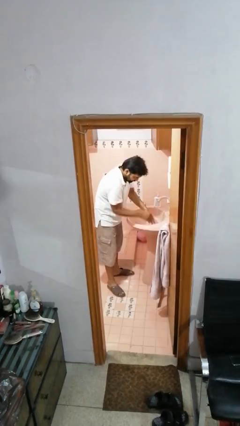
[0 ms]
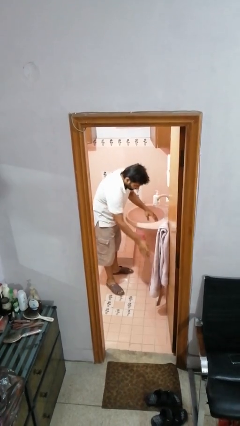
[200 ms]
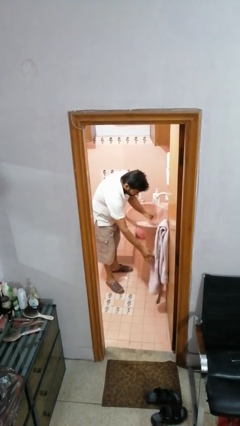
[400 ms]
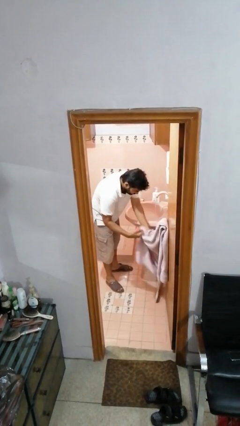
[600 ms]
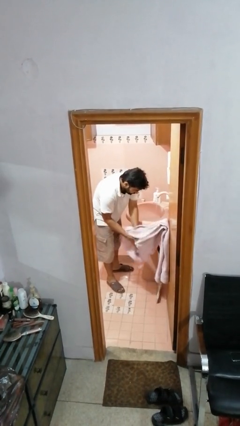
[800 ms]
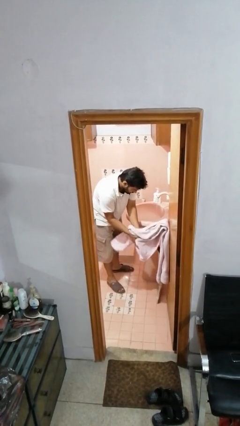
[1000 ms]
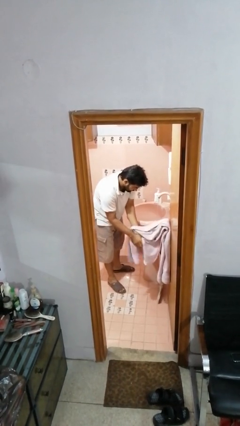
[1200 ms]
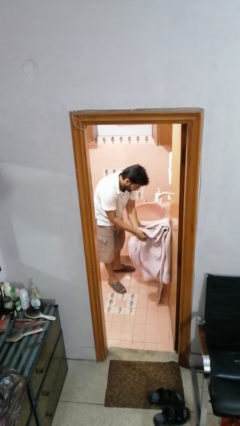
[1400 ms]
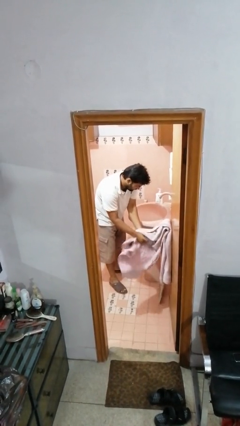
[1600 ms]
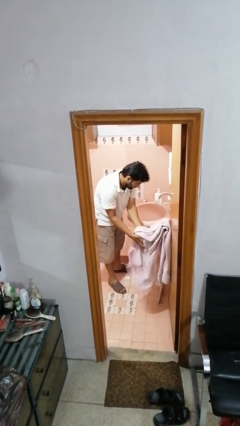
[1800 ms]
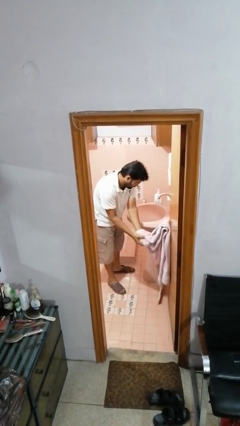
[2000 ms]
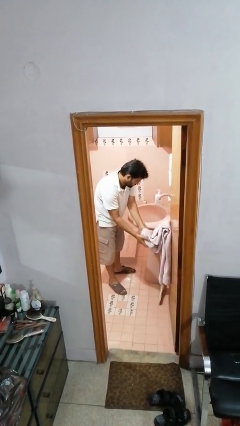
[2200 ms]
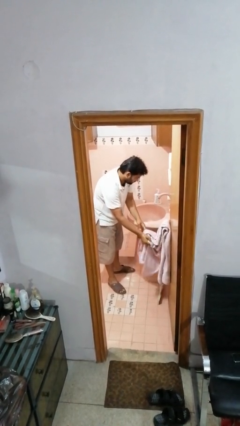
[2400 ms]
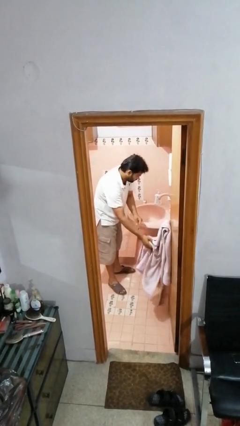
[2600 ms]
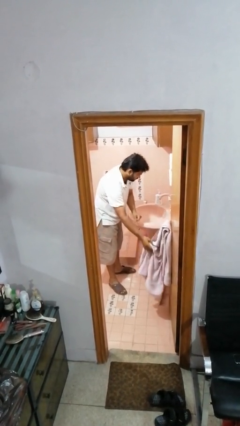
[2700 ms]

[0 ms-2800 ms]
person dries hands with towel

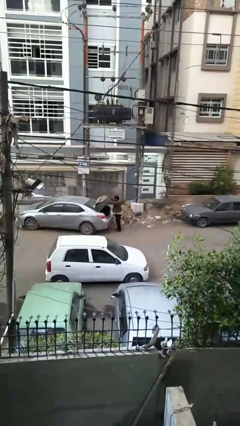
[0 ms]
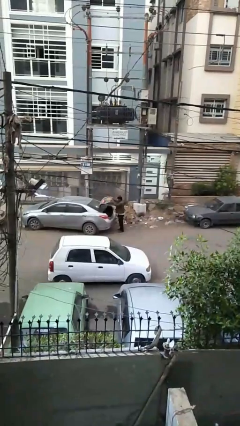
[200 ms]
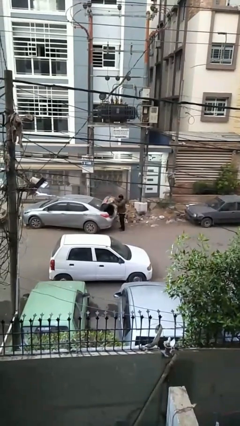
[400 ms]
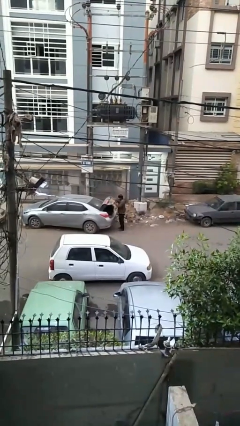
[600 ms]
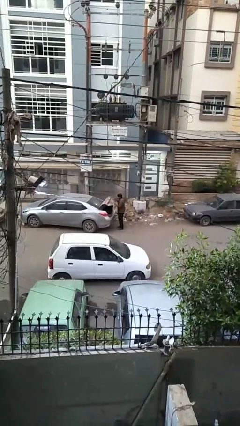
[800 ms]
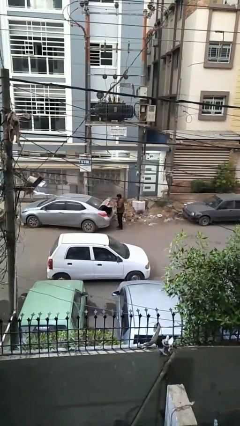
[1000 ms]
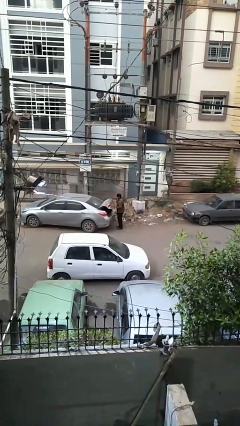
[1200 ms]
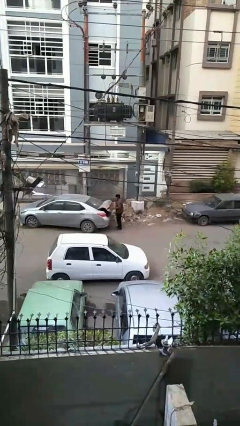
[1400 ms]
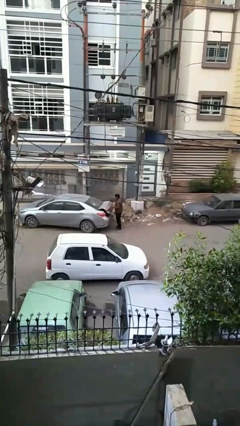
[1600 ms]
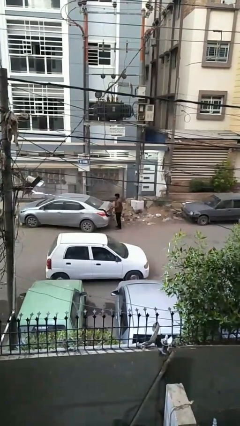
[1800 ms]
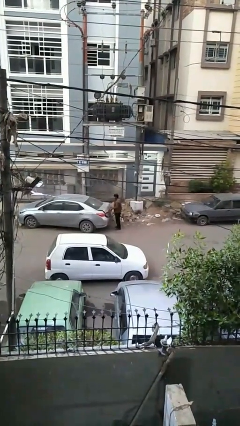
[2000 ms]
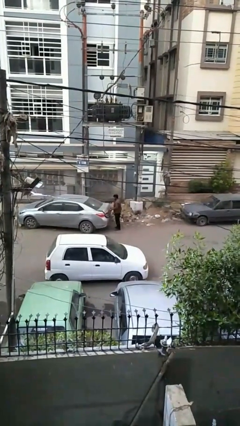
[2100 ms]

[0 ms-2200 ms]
person closes car trunk

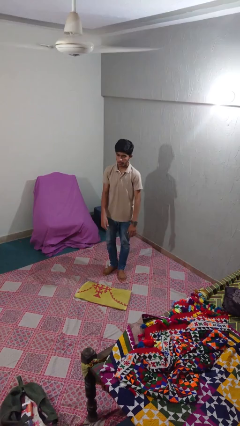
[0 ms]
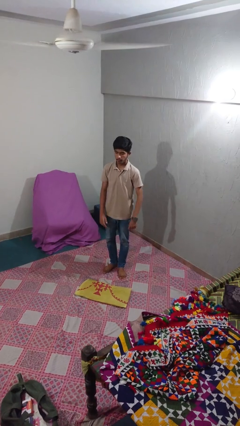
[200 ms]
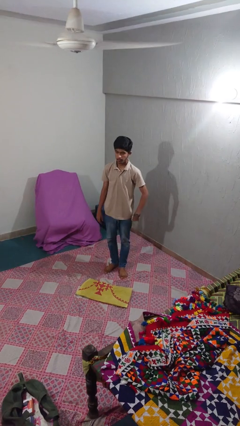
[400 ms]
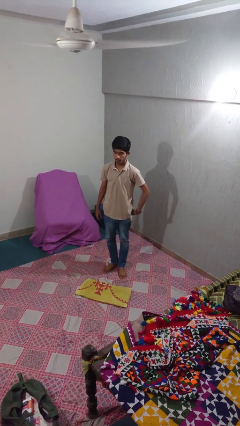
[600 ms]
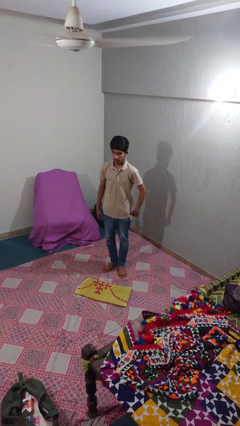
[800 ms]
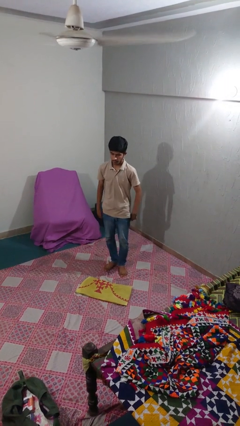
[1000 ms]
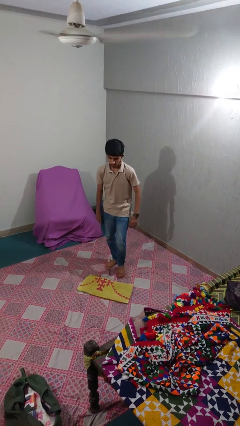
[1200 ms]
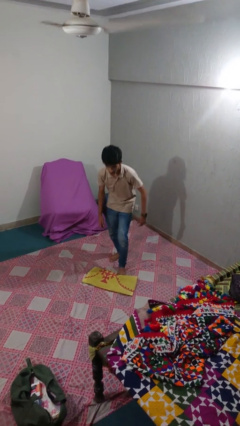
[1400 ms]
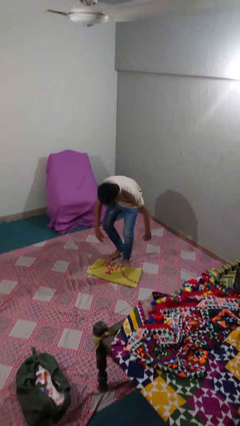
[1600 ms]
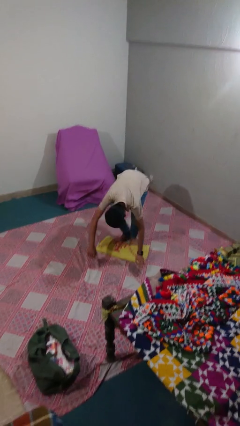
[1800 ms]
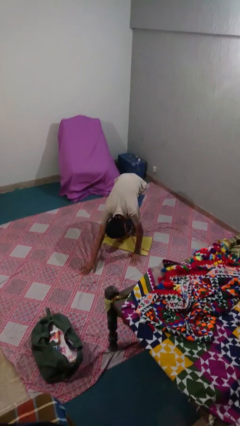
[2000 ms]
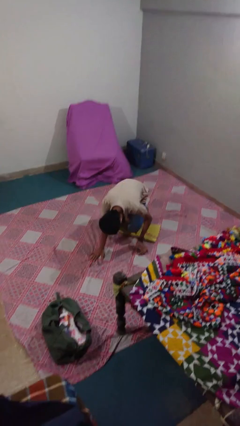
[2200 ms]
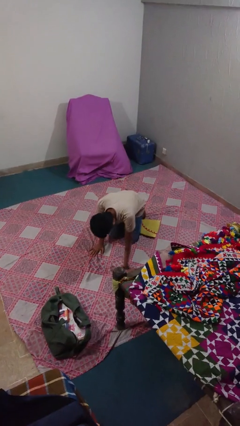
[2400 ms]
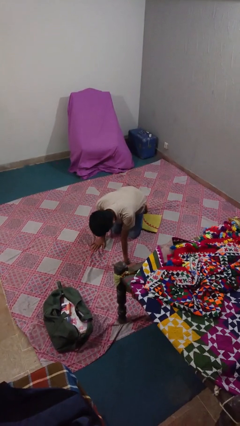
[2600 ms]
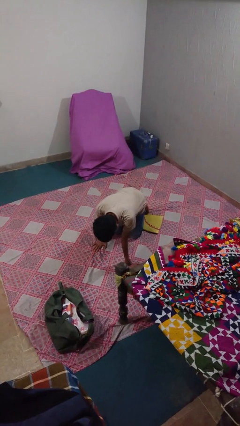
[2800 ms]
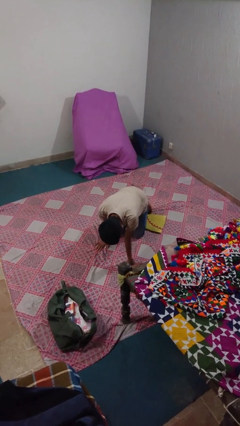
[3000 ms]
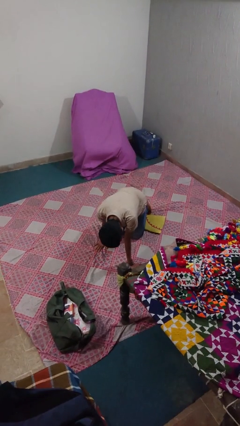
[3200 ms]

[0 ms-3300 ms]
person trips on object on floor

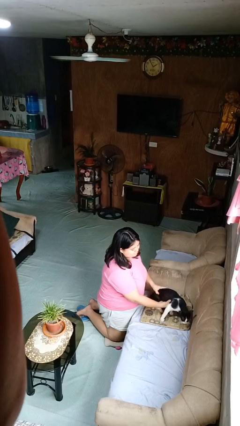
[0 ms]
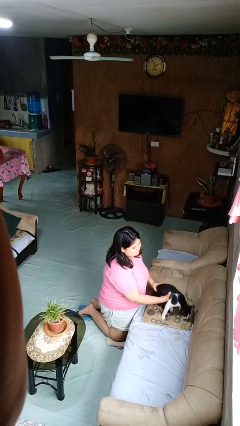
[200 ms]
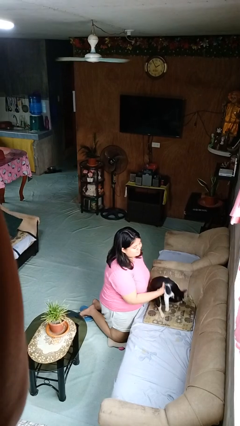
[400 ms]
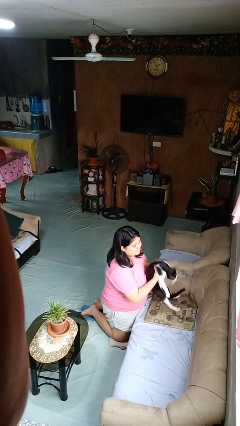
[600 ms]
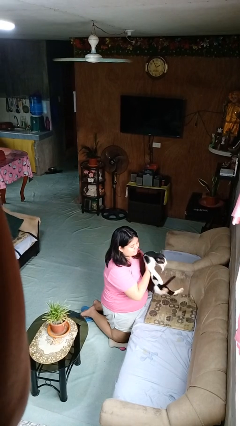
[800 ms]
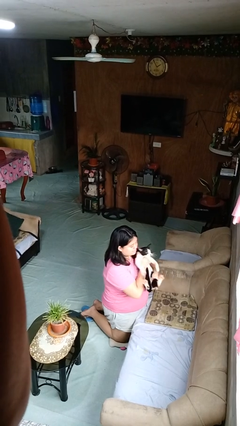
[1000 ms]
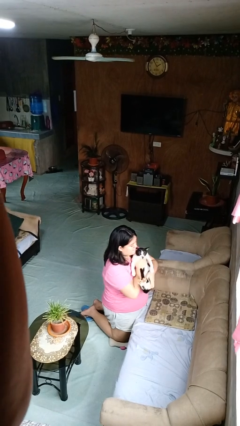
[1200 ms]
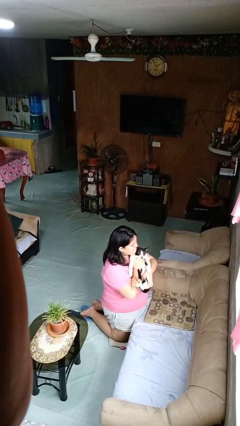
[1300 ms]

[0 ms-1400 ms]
person hugs cat

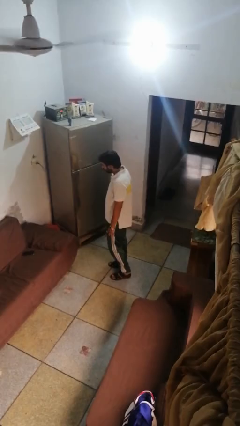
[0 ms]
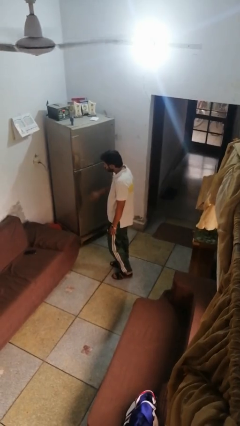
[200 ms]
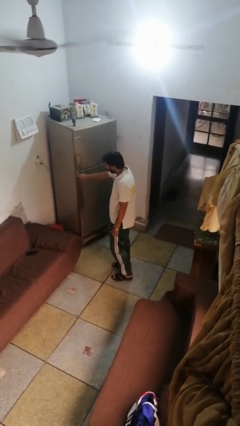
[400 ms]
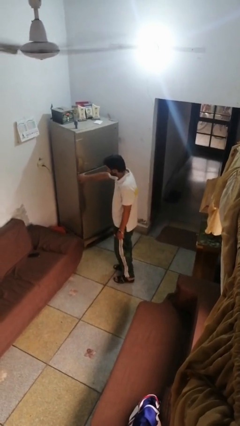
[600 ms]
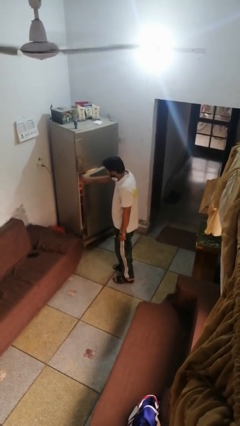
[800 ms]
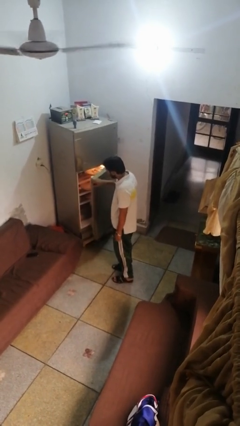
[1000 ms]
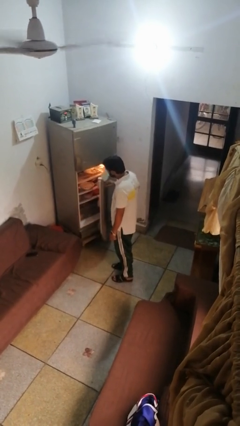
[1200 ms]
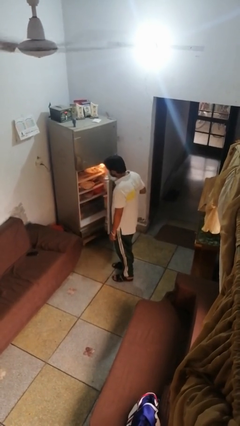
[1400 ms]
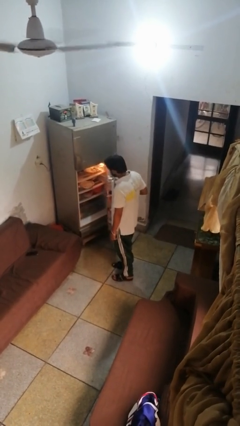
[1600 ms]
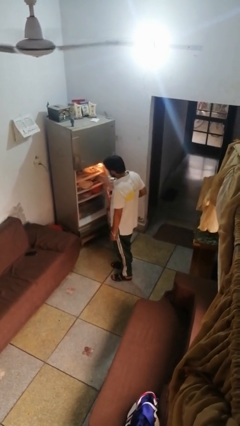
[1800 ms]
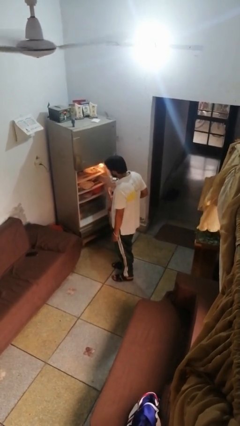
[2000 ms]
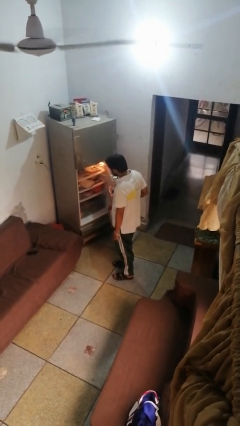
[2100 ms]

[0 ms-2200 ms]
person opens refrigerator

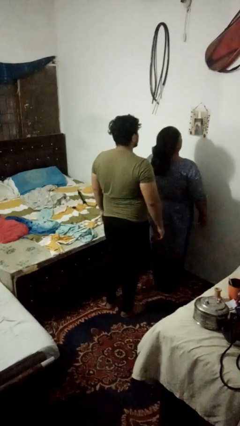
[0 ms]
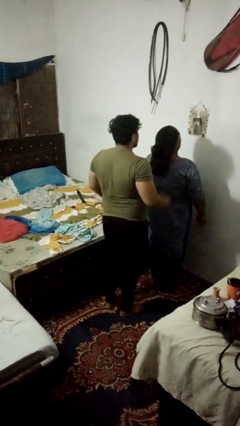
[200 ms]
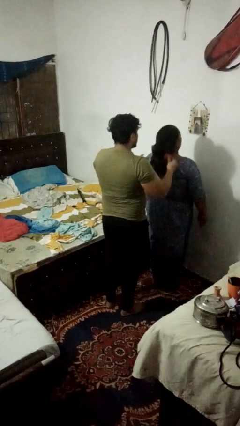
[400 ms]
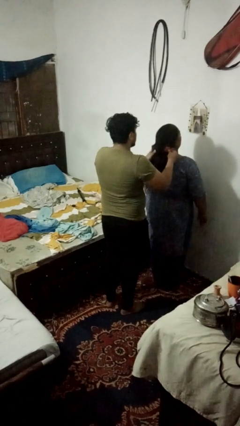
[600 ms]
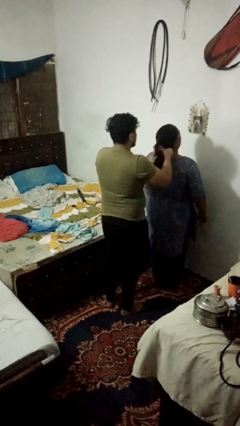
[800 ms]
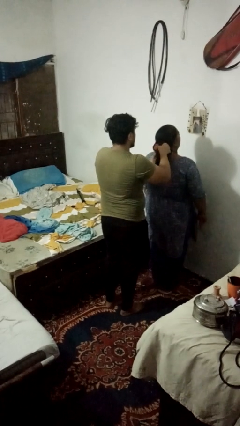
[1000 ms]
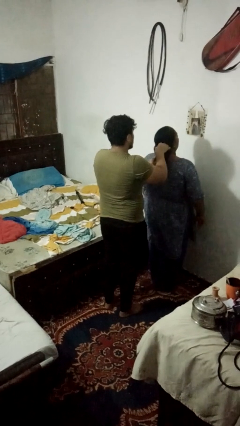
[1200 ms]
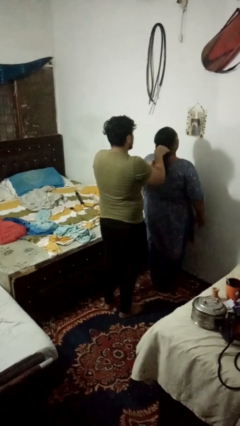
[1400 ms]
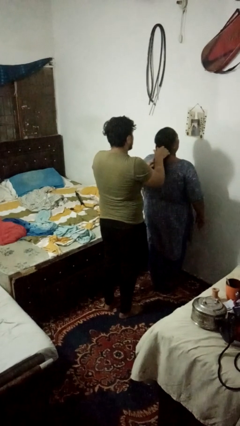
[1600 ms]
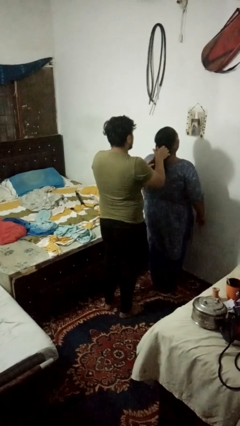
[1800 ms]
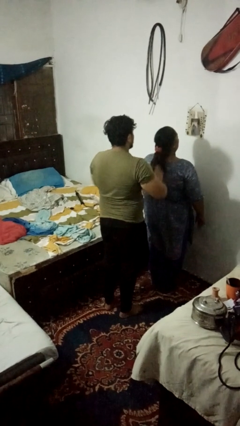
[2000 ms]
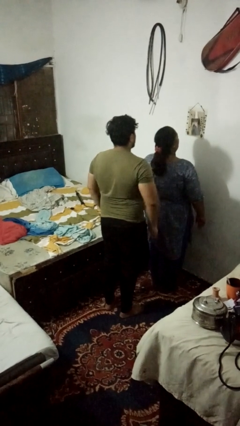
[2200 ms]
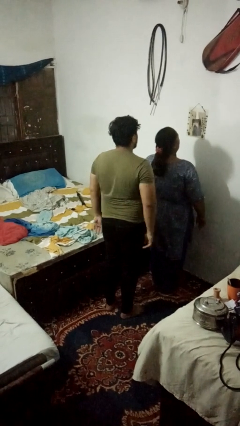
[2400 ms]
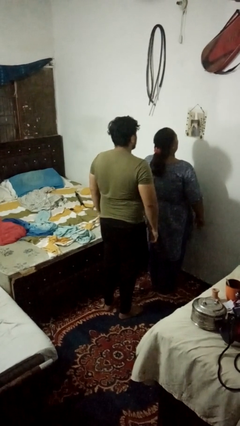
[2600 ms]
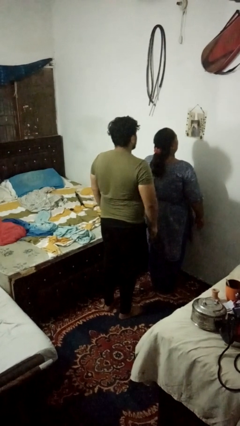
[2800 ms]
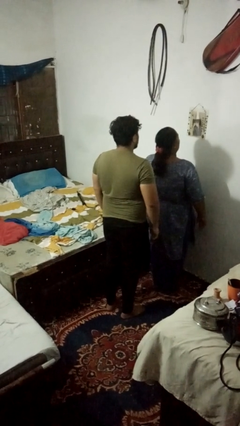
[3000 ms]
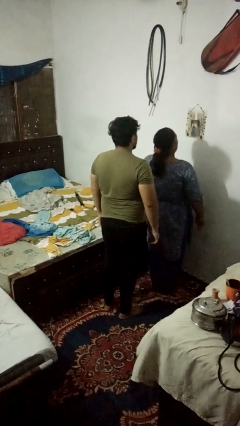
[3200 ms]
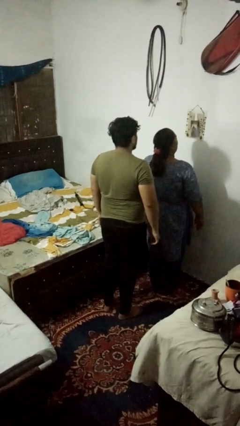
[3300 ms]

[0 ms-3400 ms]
person braids hair of person

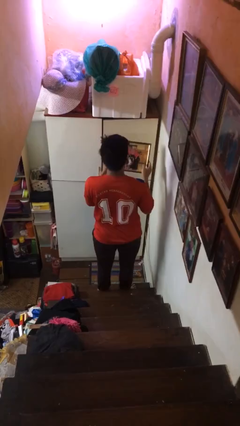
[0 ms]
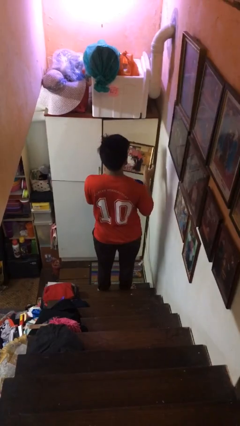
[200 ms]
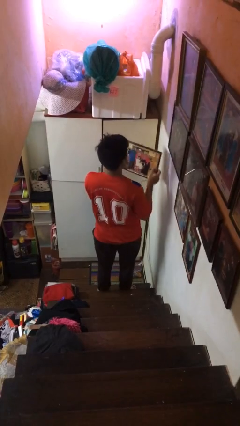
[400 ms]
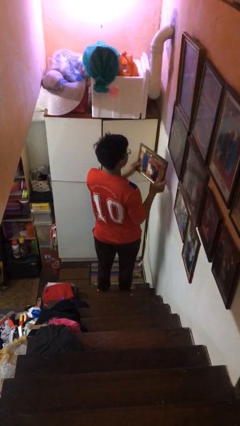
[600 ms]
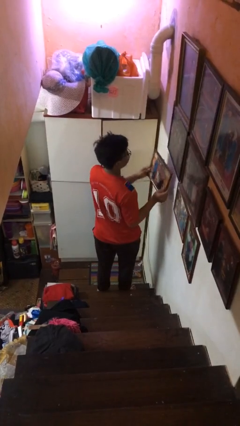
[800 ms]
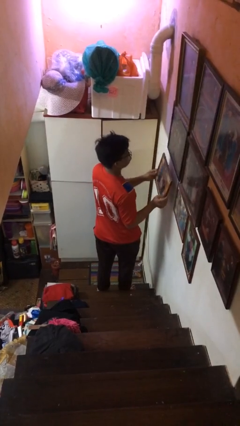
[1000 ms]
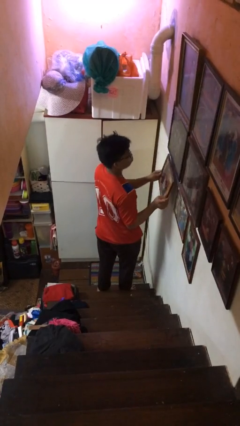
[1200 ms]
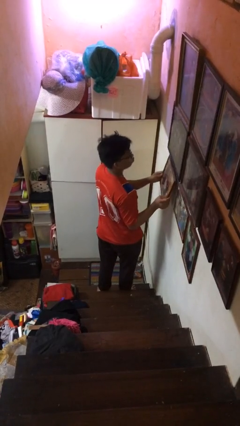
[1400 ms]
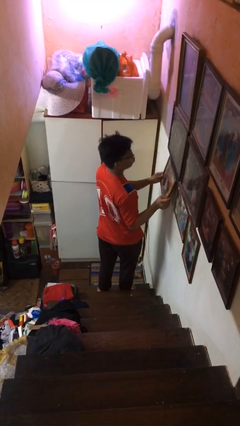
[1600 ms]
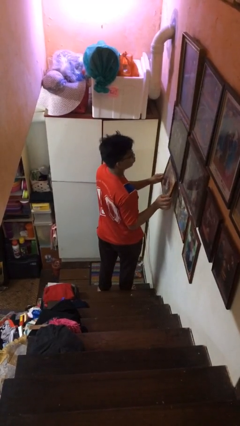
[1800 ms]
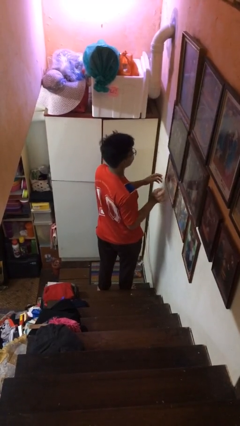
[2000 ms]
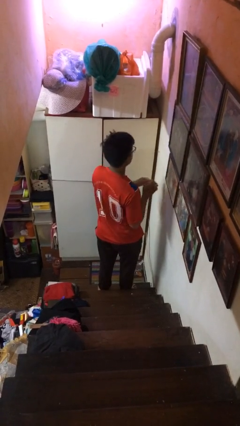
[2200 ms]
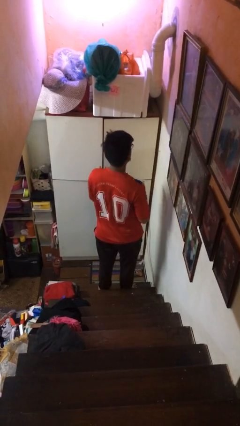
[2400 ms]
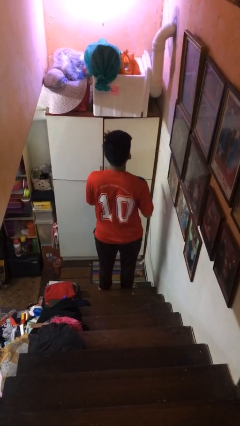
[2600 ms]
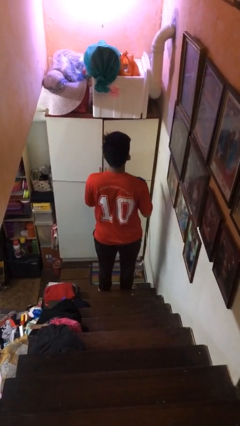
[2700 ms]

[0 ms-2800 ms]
person puts up picture frame
